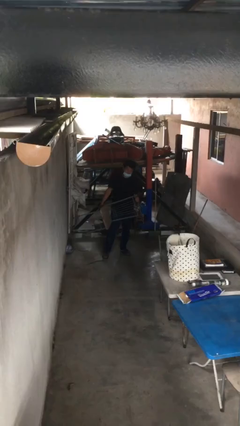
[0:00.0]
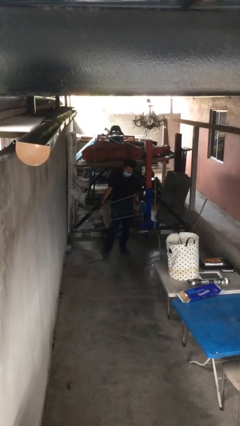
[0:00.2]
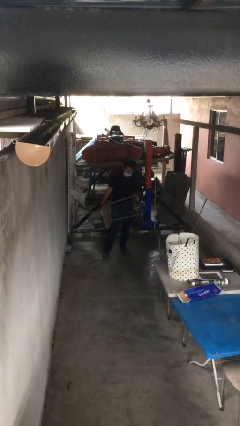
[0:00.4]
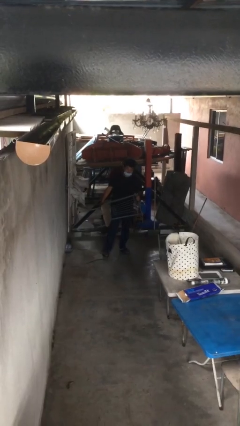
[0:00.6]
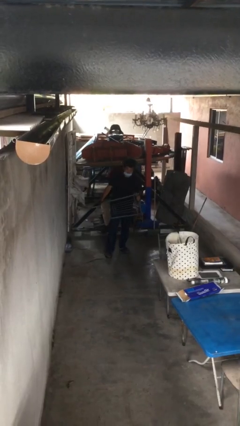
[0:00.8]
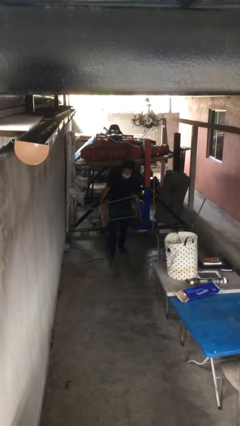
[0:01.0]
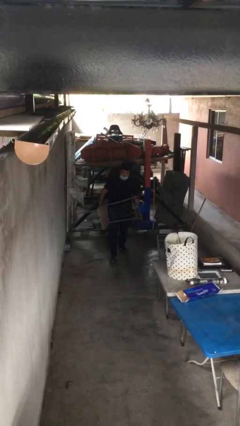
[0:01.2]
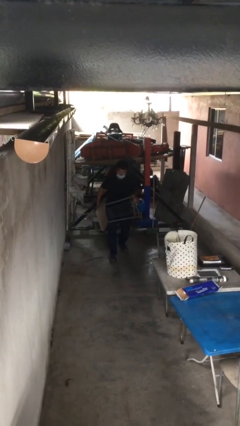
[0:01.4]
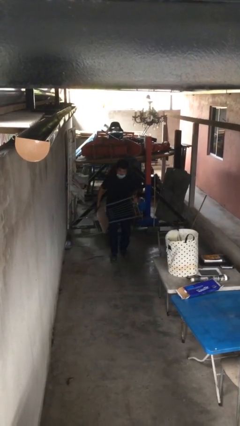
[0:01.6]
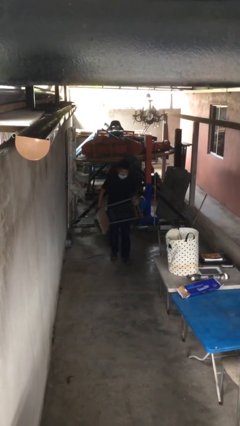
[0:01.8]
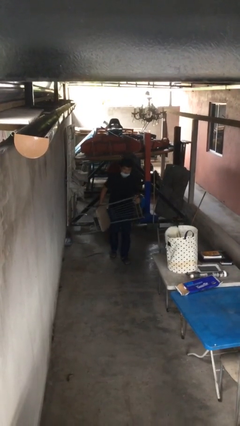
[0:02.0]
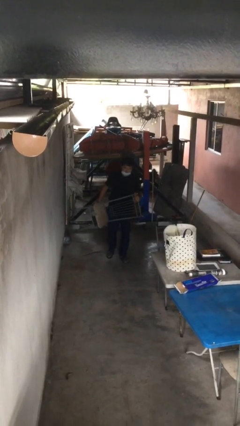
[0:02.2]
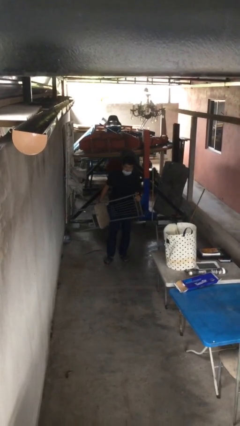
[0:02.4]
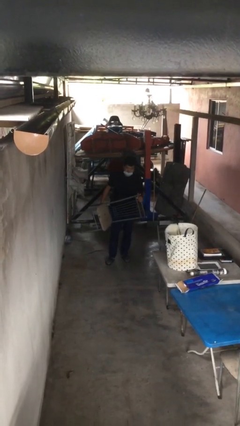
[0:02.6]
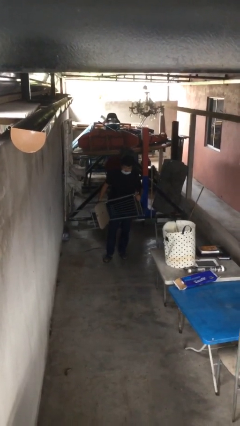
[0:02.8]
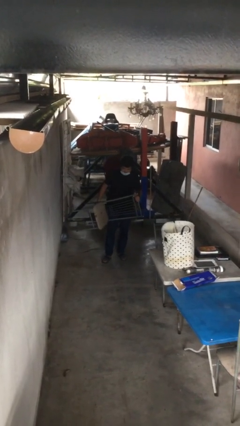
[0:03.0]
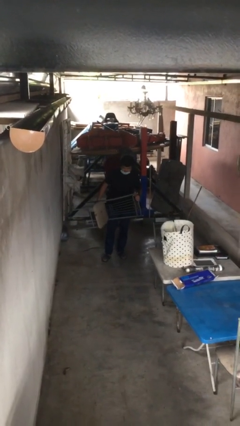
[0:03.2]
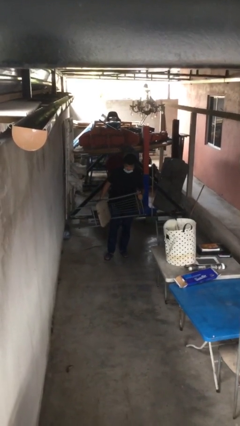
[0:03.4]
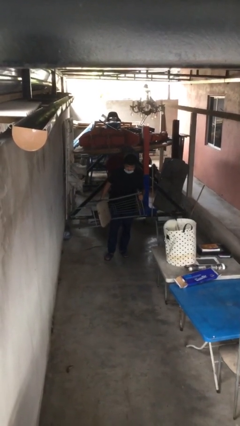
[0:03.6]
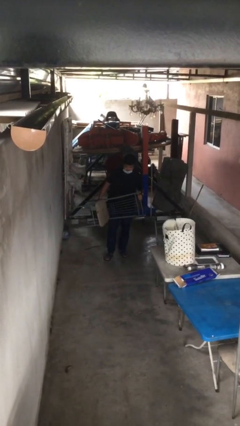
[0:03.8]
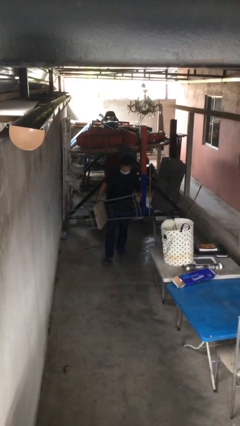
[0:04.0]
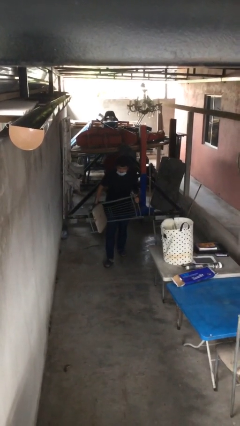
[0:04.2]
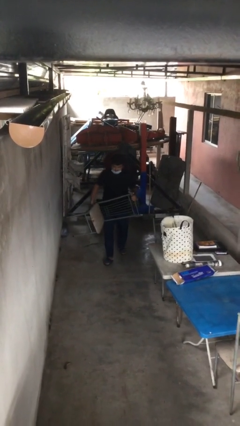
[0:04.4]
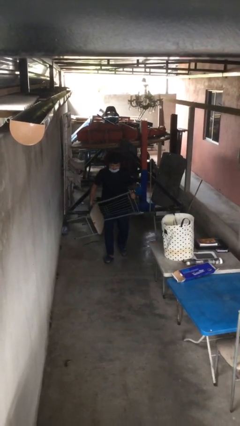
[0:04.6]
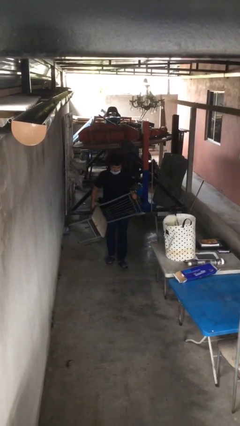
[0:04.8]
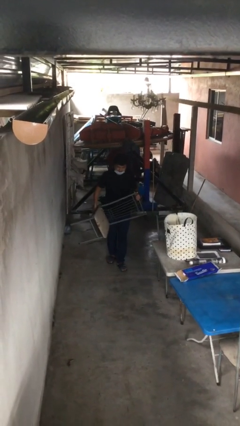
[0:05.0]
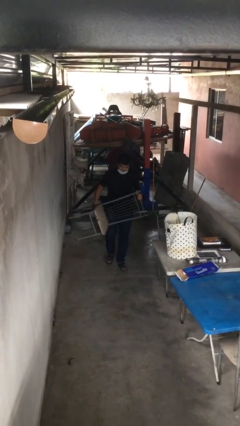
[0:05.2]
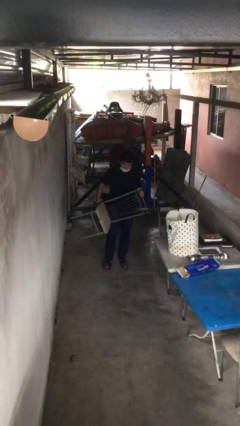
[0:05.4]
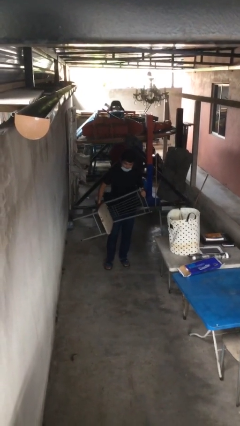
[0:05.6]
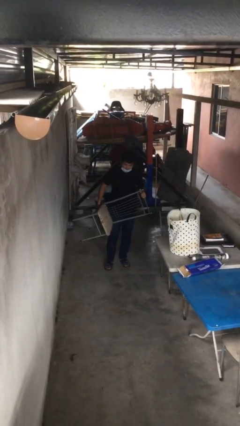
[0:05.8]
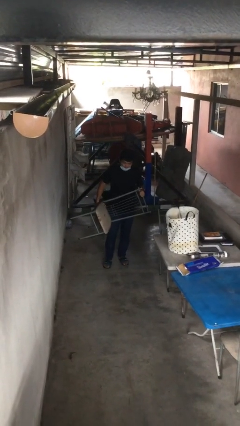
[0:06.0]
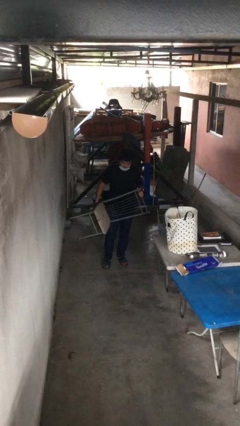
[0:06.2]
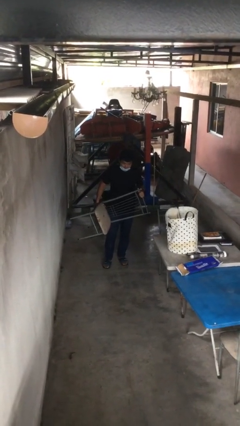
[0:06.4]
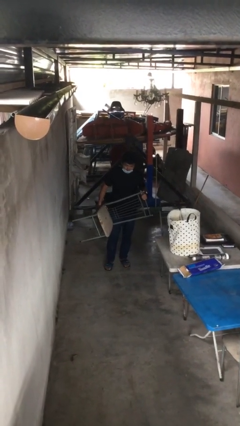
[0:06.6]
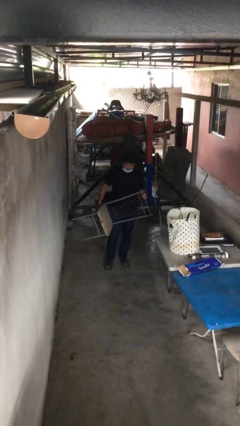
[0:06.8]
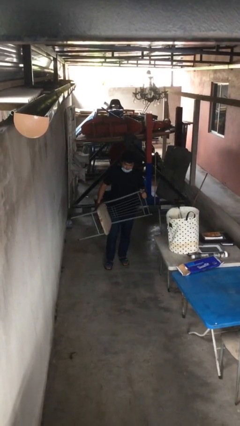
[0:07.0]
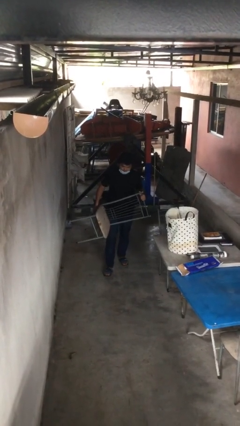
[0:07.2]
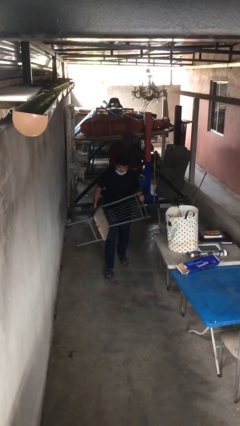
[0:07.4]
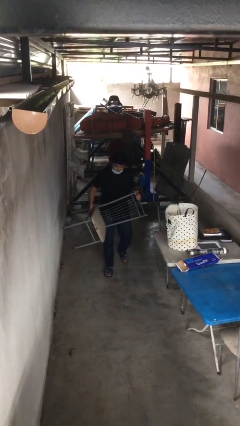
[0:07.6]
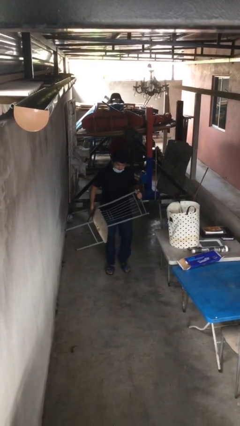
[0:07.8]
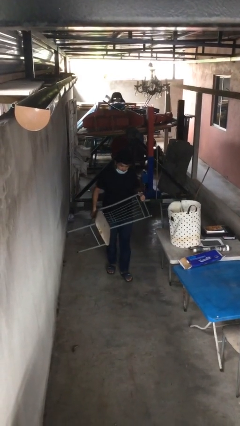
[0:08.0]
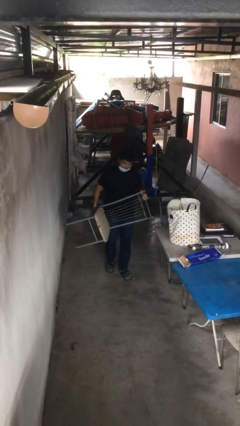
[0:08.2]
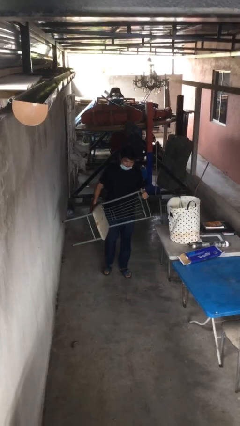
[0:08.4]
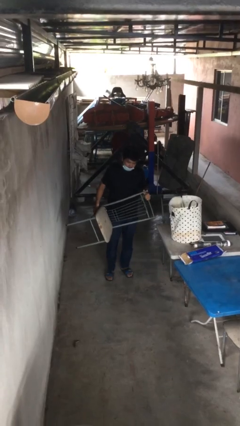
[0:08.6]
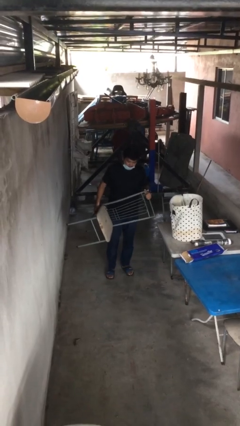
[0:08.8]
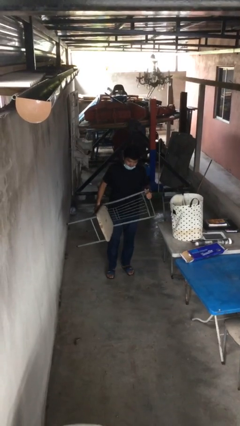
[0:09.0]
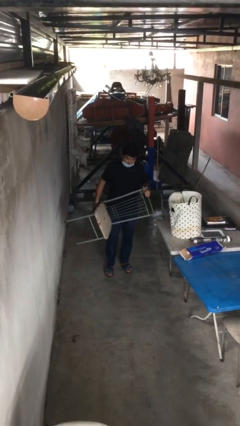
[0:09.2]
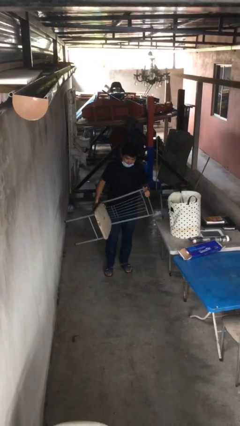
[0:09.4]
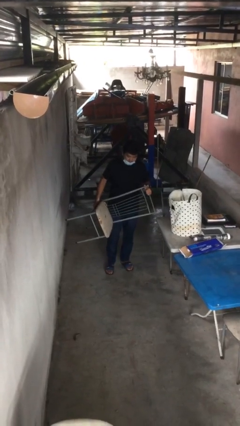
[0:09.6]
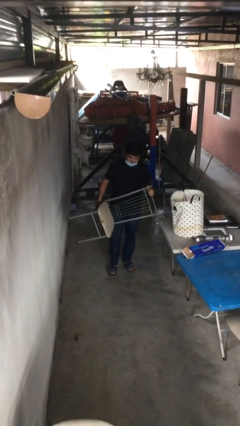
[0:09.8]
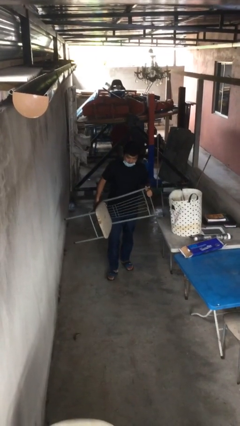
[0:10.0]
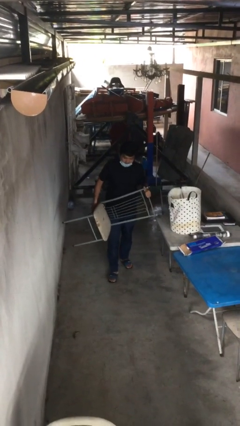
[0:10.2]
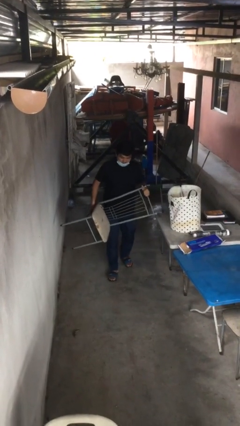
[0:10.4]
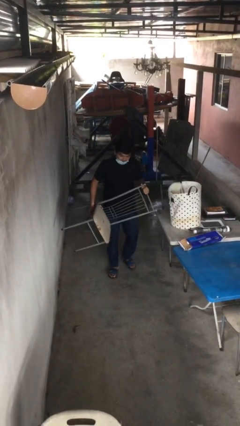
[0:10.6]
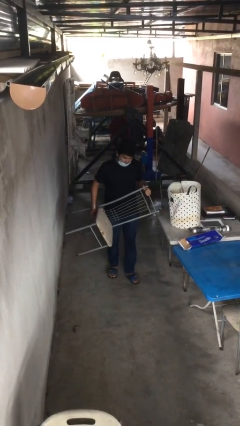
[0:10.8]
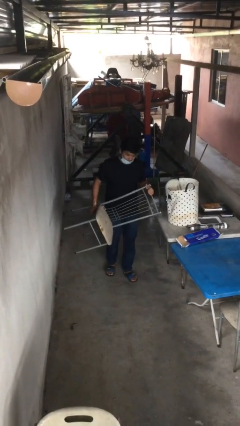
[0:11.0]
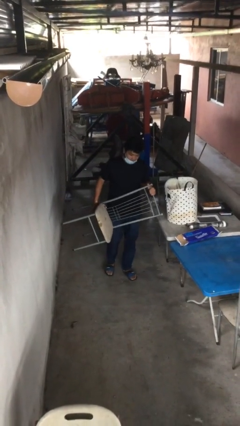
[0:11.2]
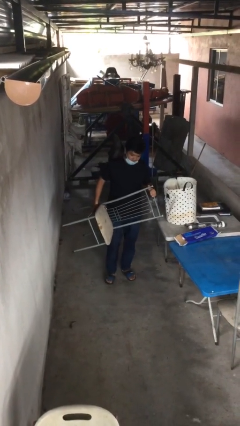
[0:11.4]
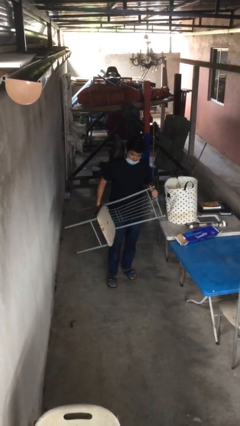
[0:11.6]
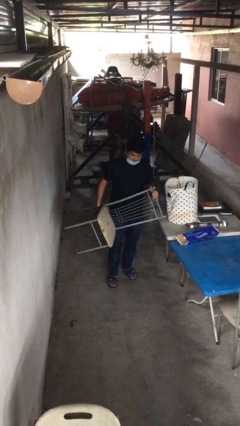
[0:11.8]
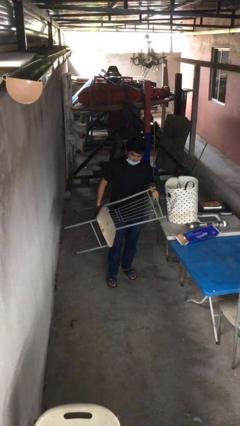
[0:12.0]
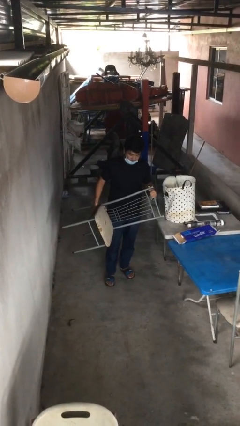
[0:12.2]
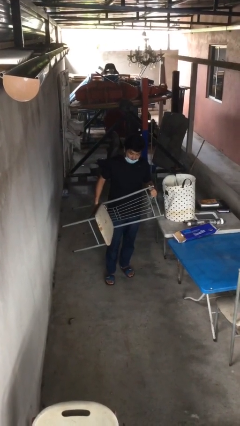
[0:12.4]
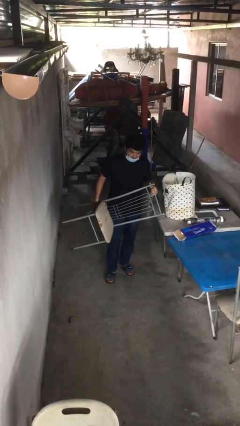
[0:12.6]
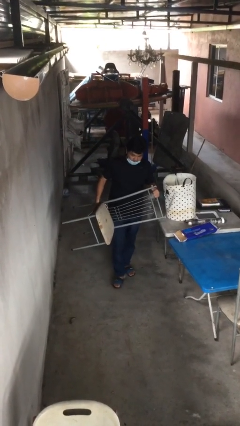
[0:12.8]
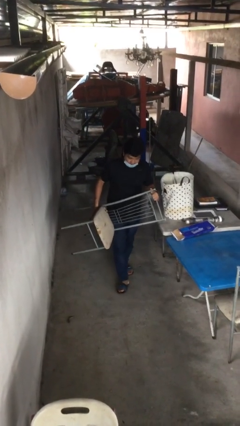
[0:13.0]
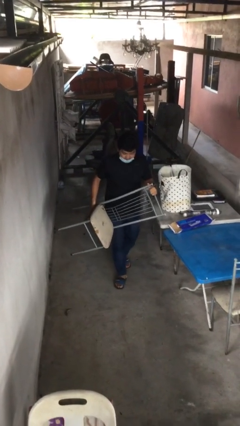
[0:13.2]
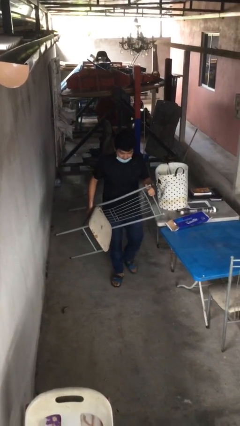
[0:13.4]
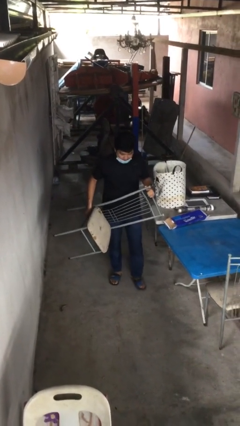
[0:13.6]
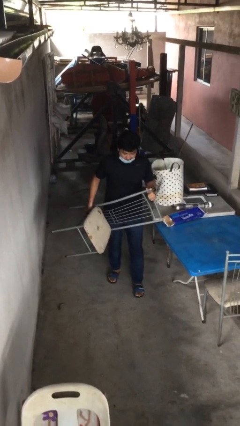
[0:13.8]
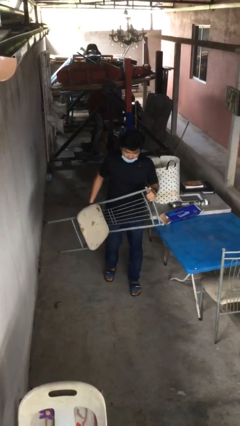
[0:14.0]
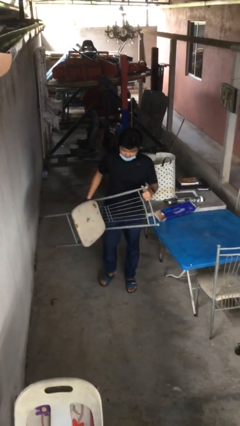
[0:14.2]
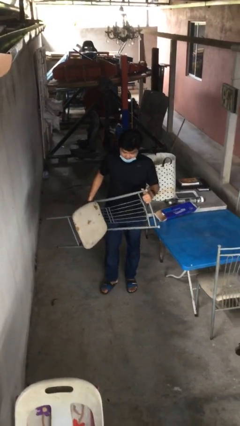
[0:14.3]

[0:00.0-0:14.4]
person carries furniture

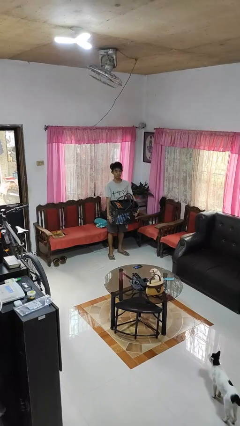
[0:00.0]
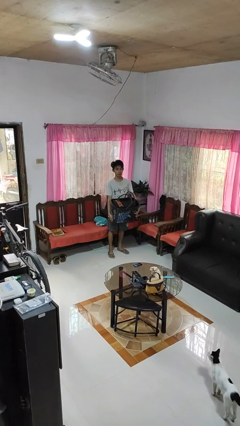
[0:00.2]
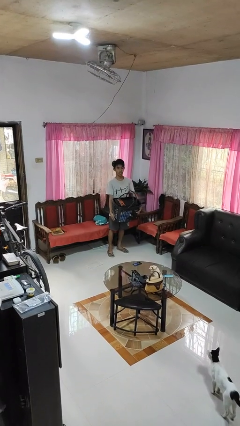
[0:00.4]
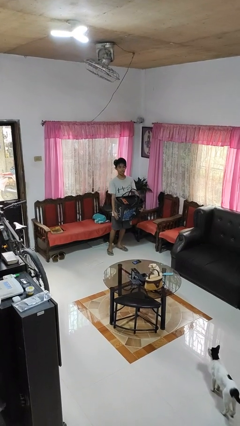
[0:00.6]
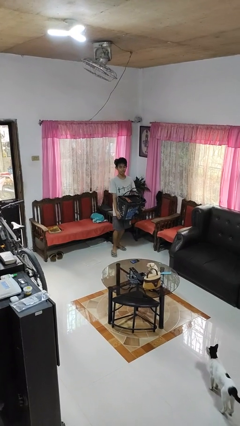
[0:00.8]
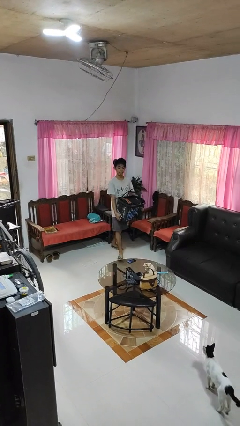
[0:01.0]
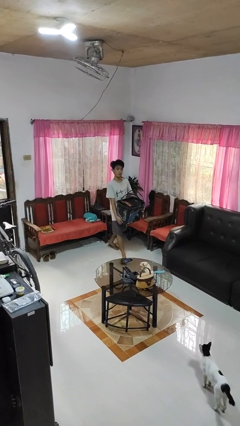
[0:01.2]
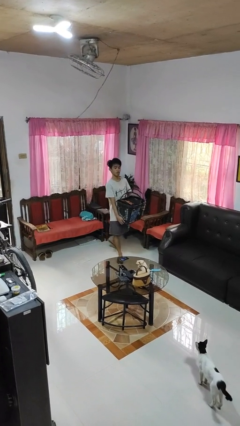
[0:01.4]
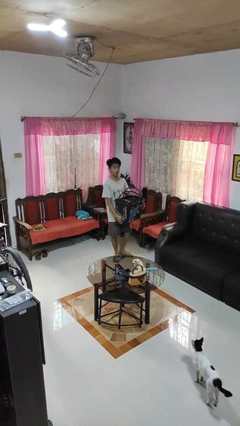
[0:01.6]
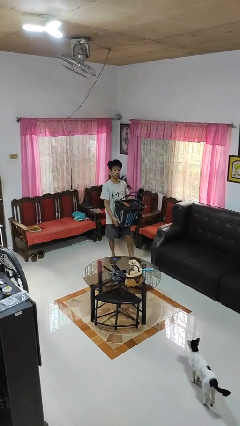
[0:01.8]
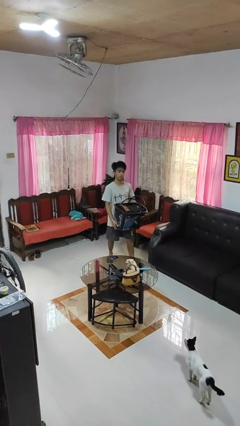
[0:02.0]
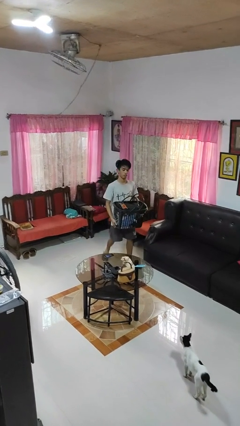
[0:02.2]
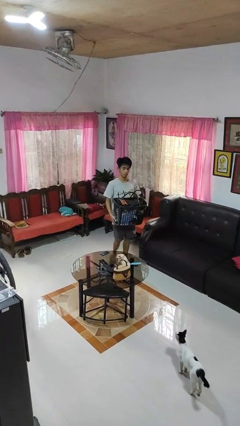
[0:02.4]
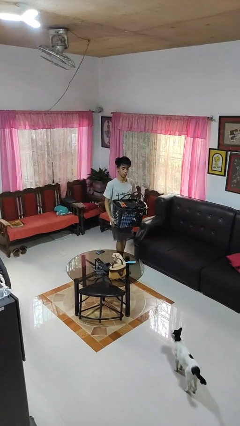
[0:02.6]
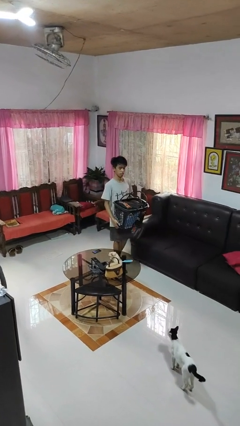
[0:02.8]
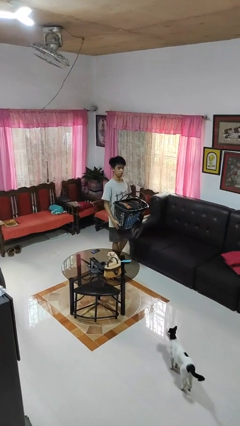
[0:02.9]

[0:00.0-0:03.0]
person carries laundry basket

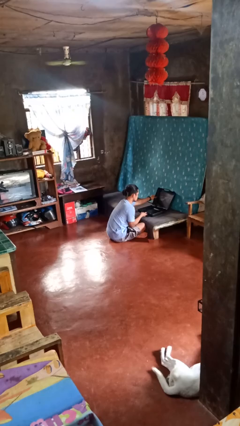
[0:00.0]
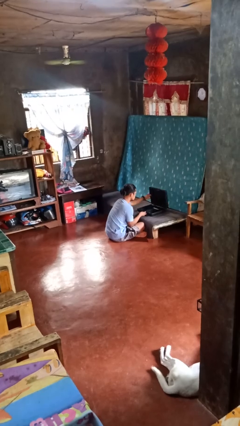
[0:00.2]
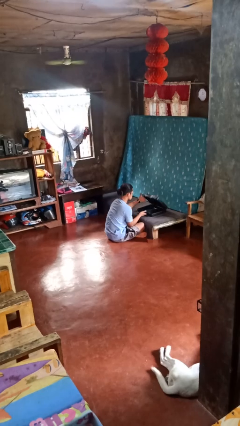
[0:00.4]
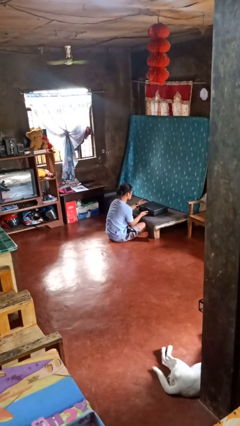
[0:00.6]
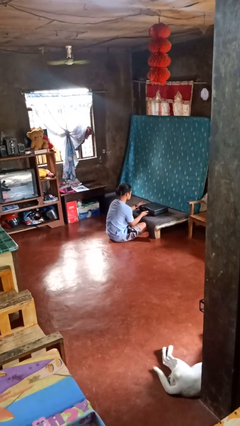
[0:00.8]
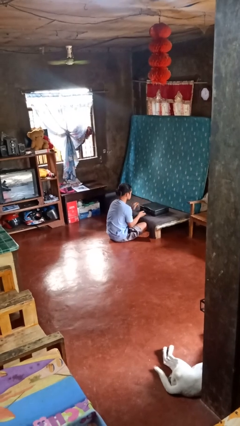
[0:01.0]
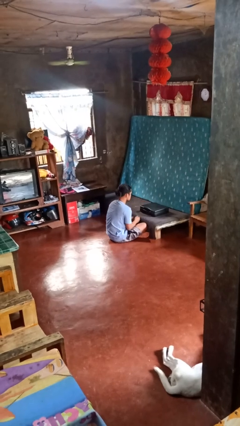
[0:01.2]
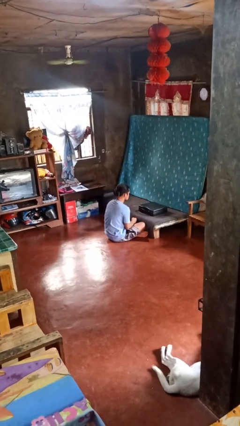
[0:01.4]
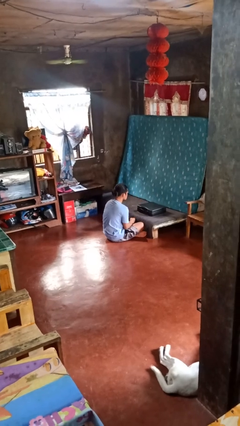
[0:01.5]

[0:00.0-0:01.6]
person closes suitcase
